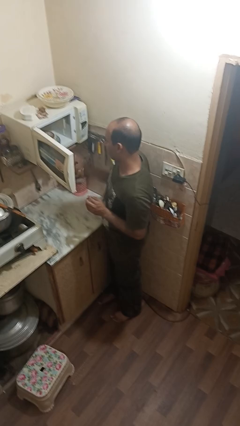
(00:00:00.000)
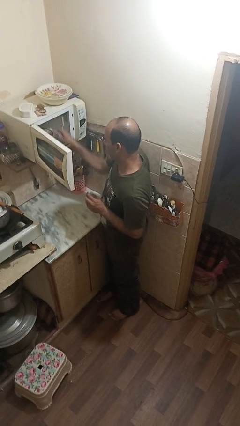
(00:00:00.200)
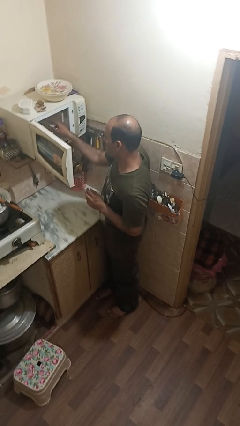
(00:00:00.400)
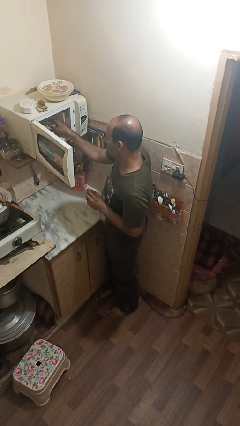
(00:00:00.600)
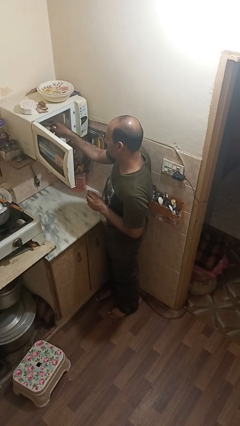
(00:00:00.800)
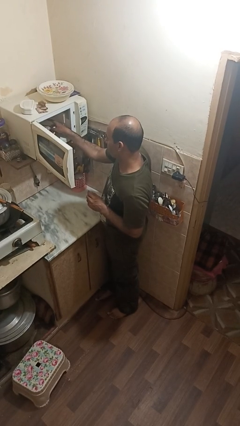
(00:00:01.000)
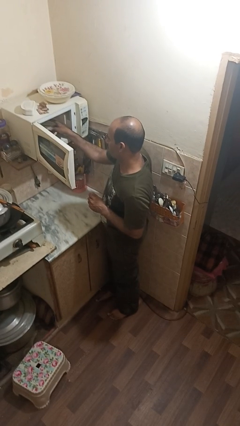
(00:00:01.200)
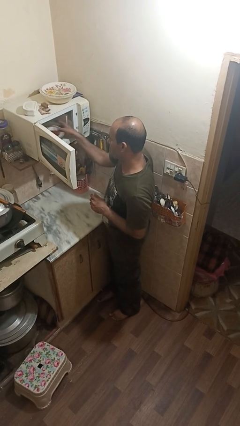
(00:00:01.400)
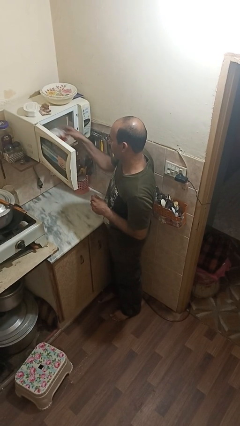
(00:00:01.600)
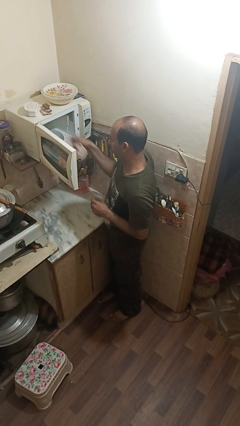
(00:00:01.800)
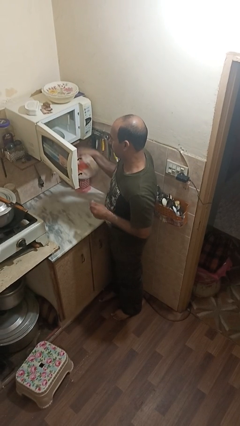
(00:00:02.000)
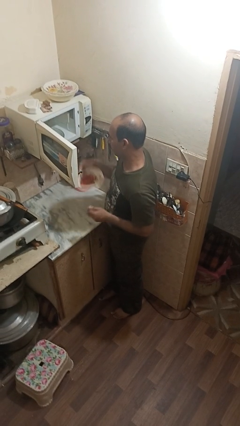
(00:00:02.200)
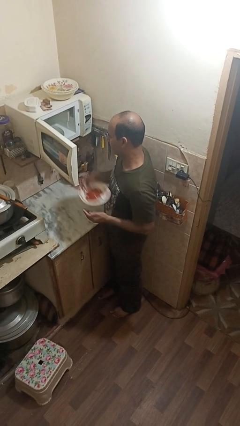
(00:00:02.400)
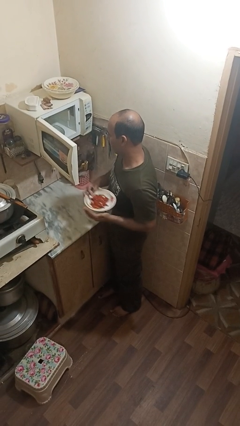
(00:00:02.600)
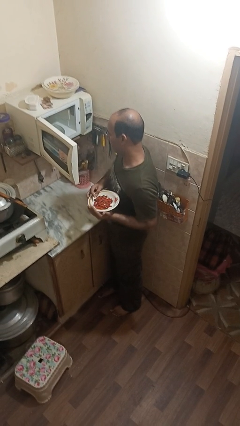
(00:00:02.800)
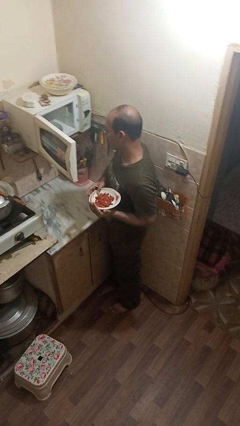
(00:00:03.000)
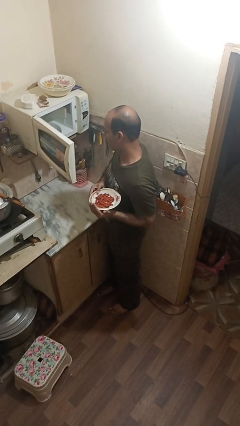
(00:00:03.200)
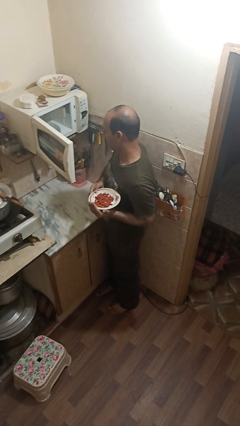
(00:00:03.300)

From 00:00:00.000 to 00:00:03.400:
person takes object from microwave

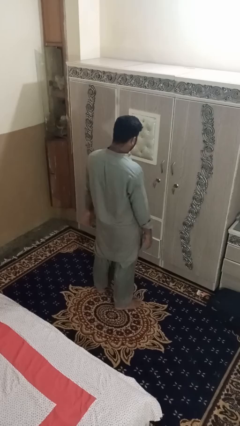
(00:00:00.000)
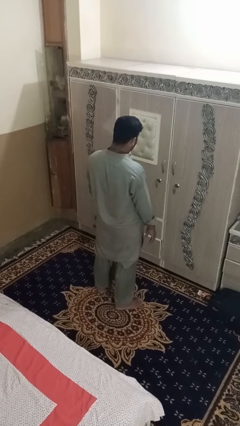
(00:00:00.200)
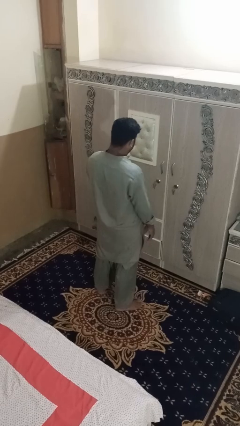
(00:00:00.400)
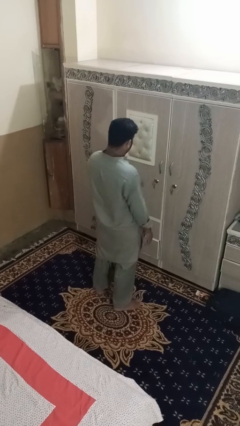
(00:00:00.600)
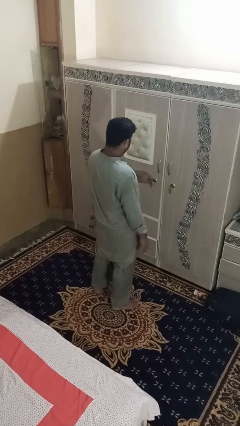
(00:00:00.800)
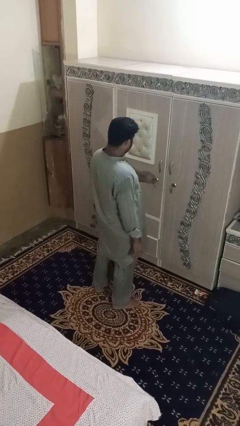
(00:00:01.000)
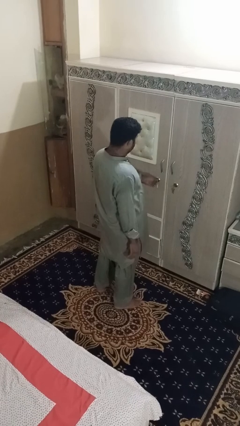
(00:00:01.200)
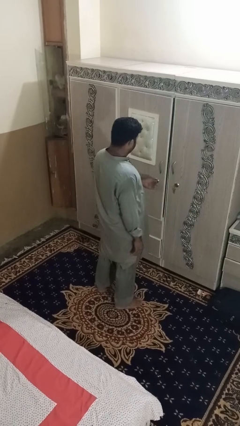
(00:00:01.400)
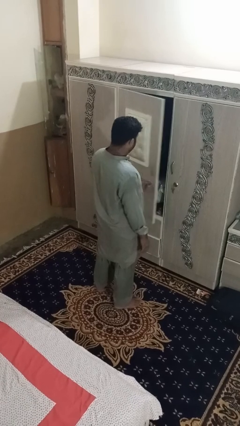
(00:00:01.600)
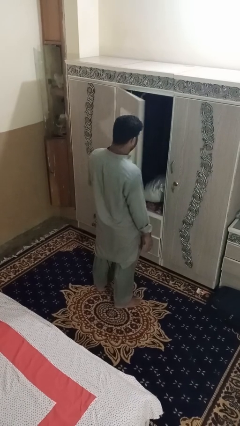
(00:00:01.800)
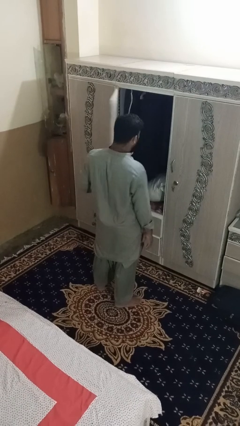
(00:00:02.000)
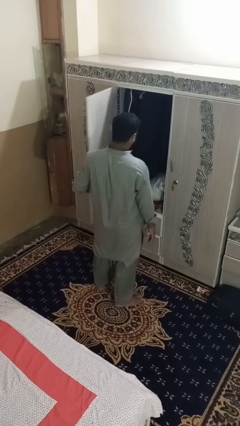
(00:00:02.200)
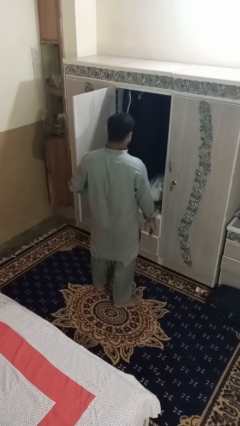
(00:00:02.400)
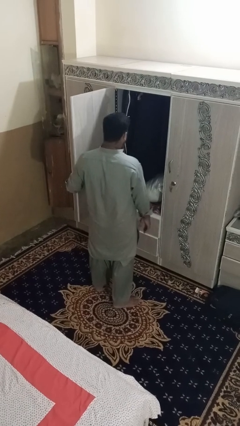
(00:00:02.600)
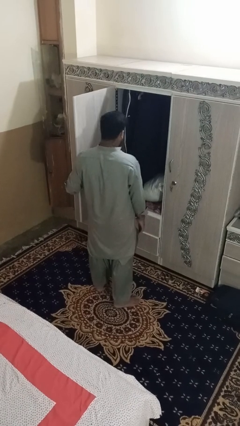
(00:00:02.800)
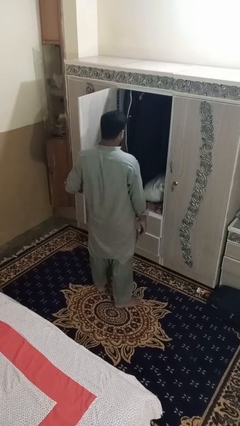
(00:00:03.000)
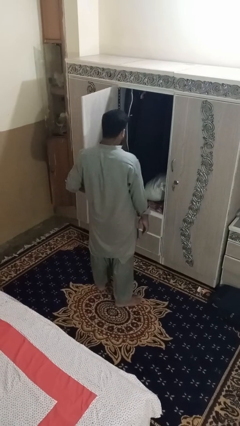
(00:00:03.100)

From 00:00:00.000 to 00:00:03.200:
person opens dresser drawer

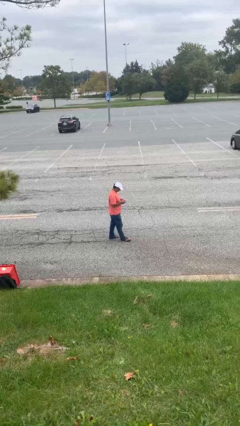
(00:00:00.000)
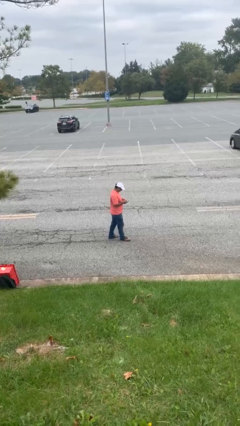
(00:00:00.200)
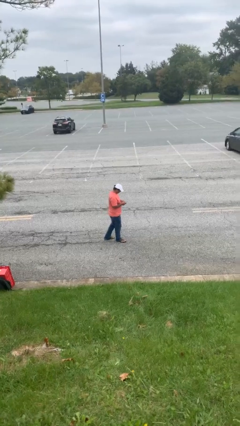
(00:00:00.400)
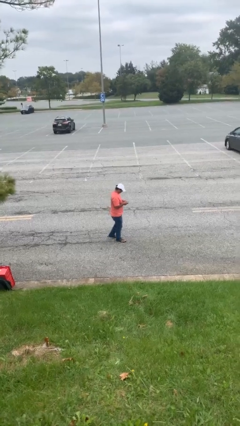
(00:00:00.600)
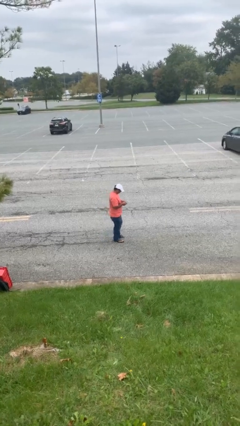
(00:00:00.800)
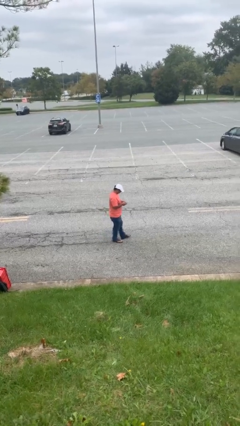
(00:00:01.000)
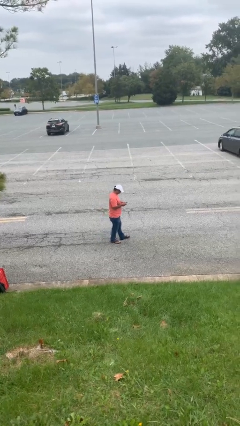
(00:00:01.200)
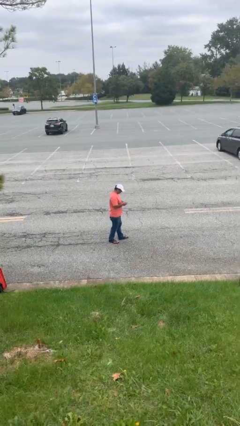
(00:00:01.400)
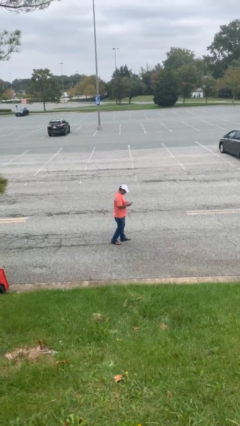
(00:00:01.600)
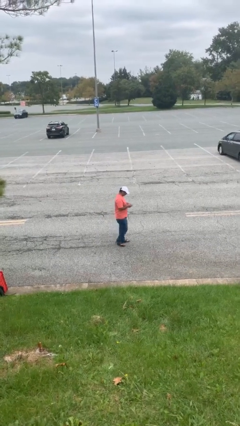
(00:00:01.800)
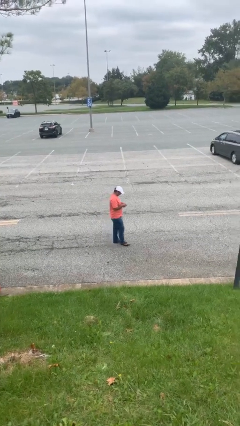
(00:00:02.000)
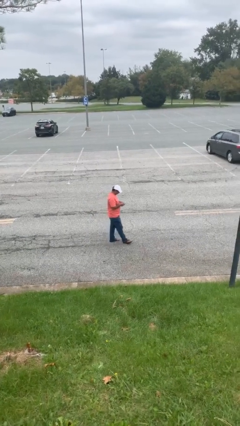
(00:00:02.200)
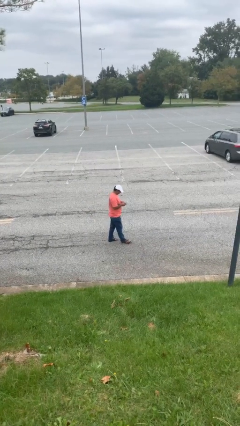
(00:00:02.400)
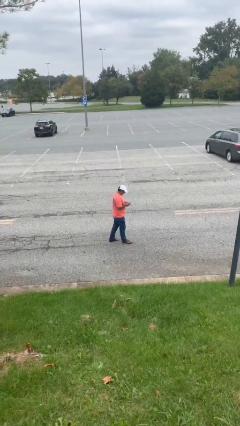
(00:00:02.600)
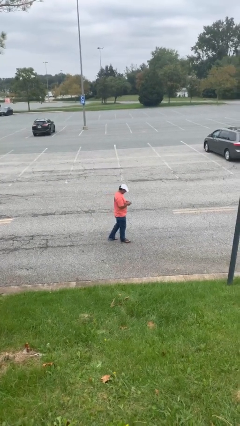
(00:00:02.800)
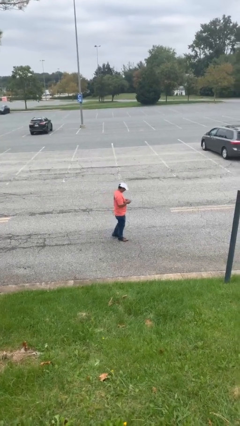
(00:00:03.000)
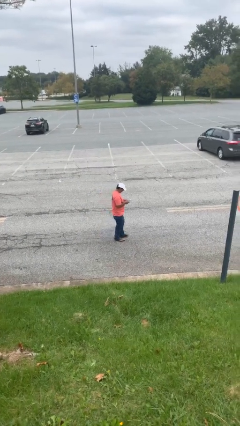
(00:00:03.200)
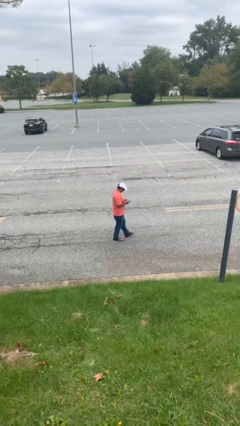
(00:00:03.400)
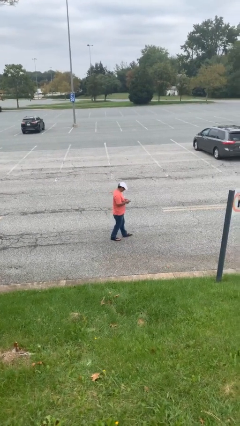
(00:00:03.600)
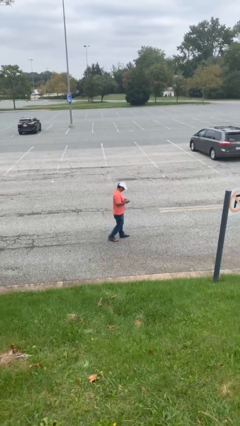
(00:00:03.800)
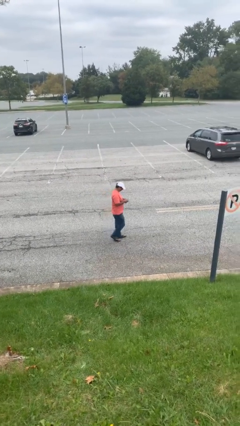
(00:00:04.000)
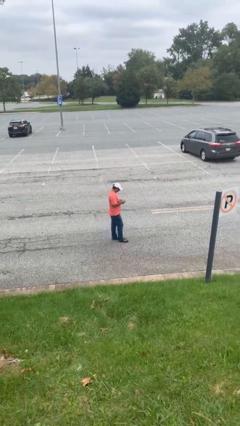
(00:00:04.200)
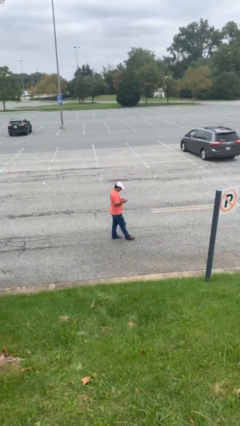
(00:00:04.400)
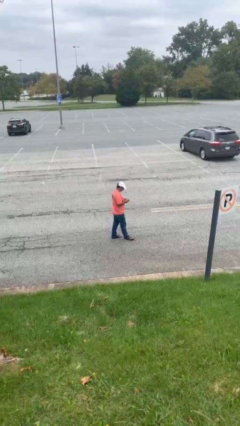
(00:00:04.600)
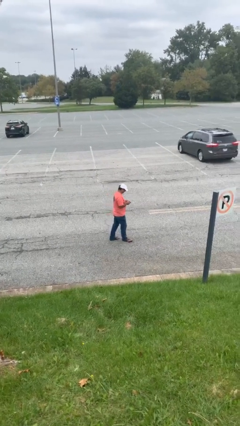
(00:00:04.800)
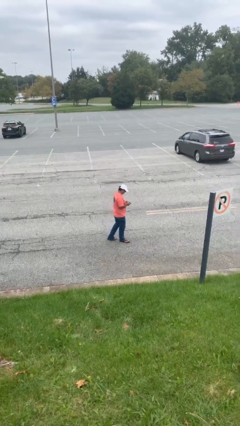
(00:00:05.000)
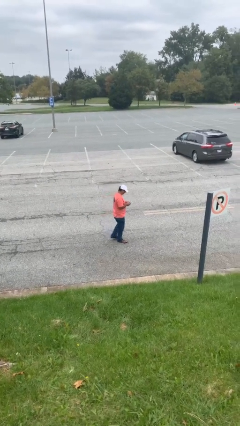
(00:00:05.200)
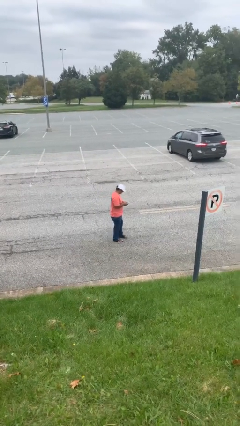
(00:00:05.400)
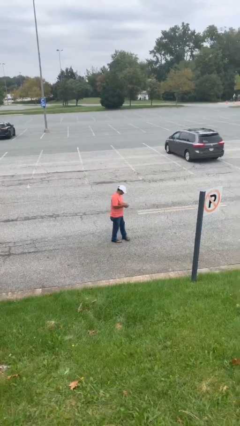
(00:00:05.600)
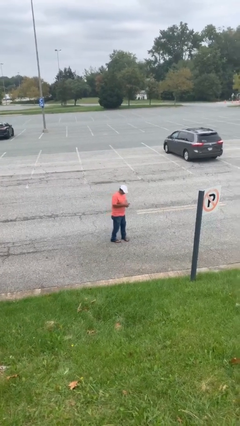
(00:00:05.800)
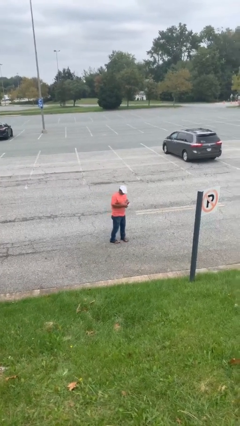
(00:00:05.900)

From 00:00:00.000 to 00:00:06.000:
person texts on phone

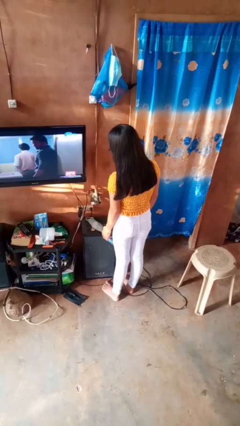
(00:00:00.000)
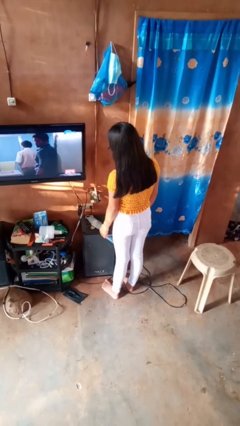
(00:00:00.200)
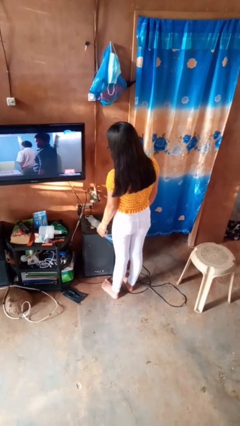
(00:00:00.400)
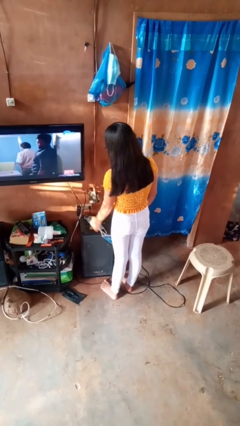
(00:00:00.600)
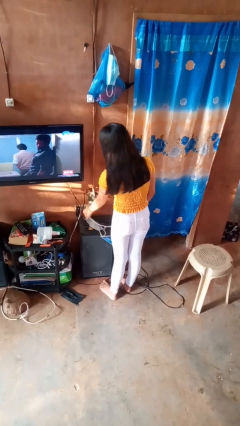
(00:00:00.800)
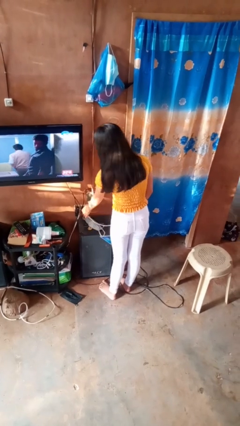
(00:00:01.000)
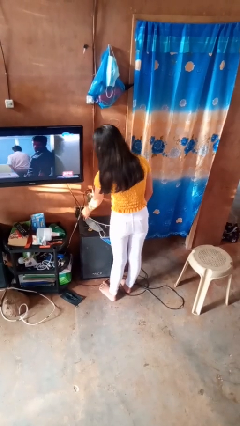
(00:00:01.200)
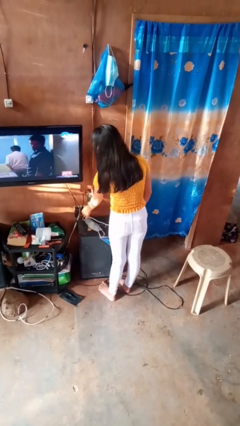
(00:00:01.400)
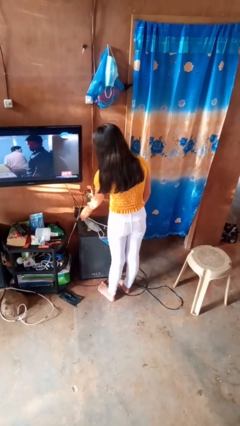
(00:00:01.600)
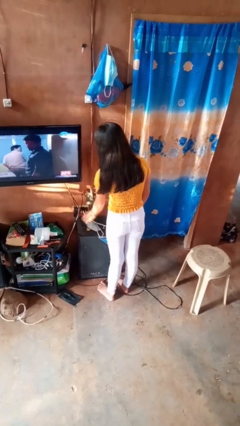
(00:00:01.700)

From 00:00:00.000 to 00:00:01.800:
person plugs into electrical socket

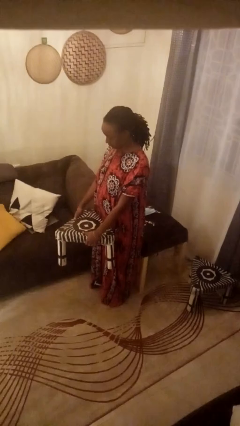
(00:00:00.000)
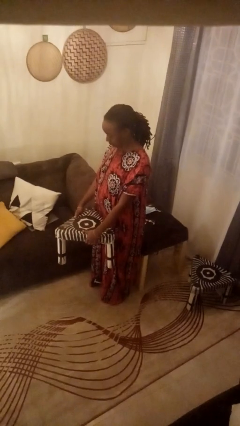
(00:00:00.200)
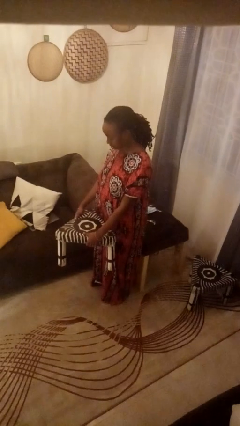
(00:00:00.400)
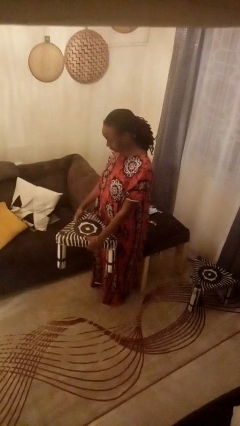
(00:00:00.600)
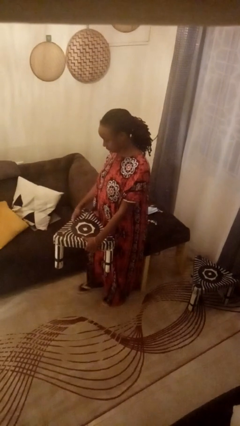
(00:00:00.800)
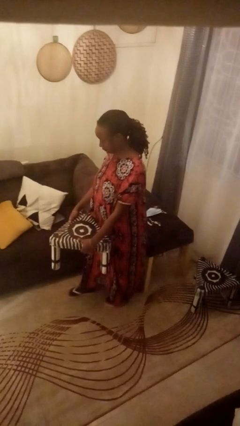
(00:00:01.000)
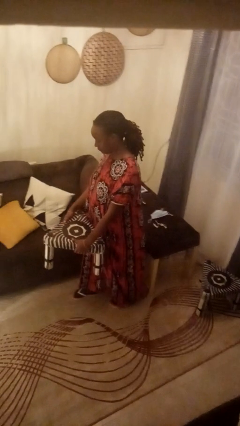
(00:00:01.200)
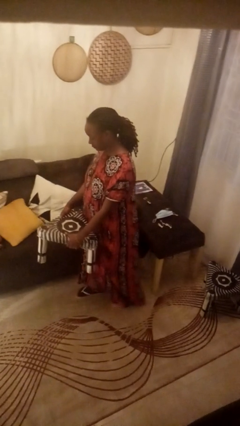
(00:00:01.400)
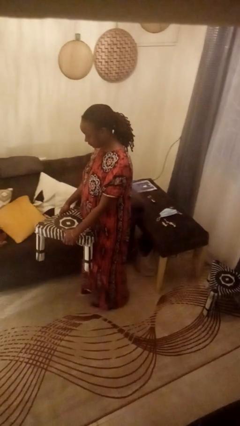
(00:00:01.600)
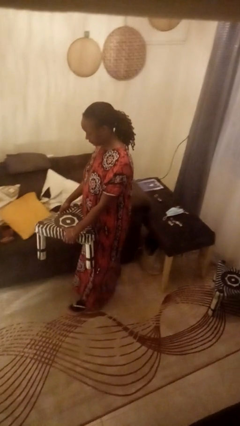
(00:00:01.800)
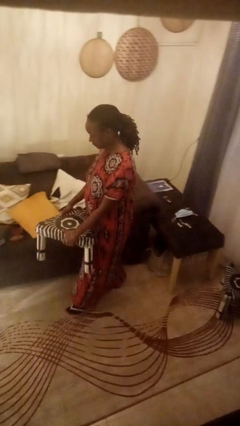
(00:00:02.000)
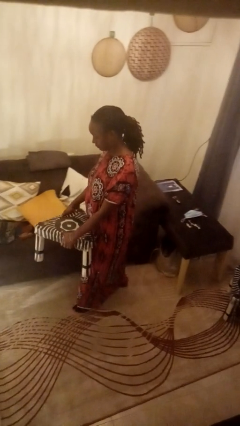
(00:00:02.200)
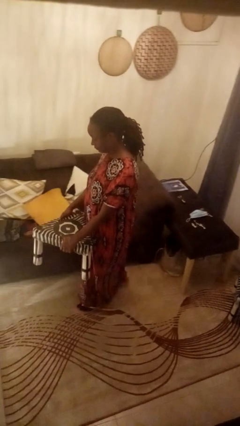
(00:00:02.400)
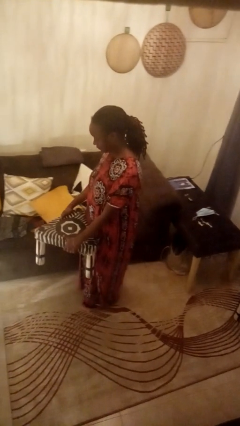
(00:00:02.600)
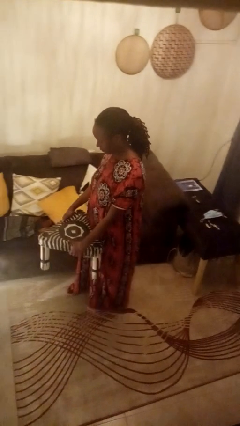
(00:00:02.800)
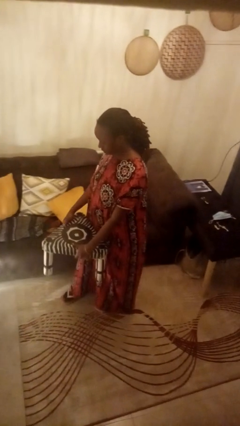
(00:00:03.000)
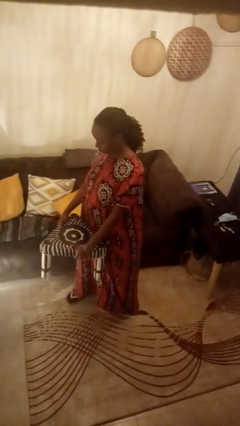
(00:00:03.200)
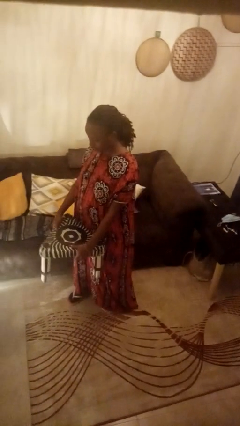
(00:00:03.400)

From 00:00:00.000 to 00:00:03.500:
person carries furniture
